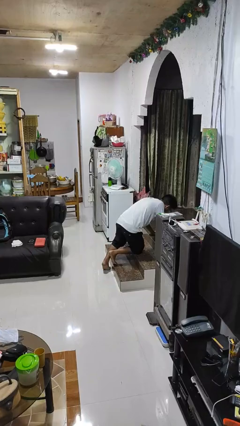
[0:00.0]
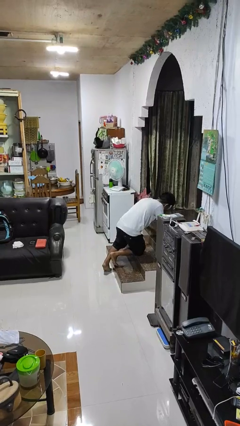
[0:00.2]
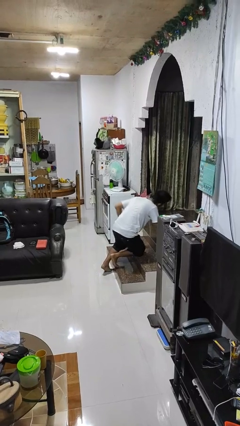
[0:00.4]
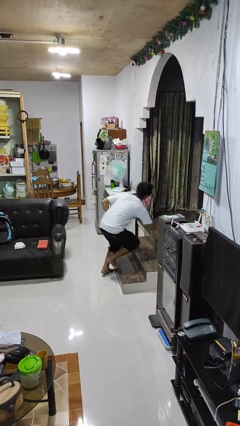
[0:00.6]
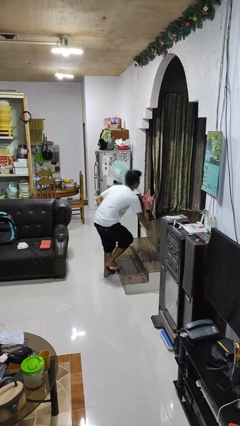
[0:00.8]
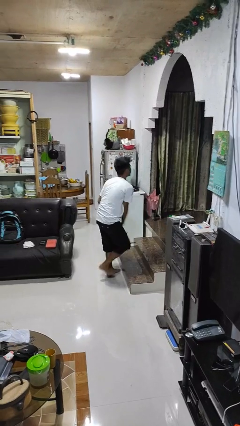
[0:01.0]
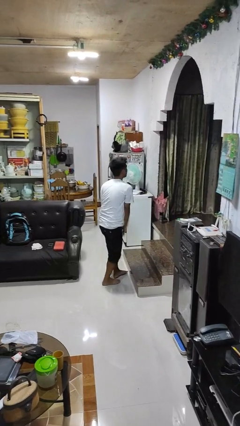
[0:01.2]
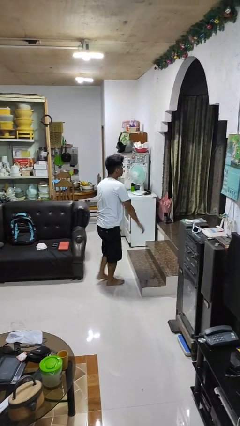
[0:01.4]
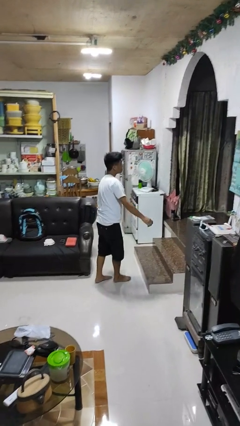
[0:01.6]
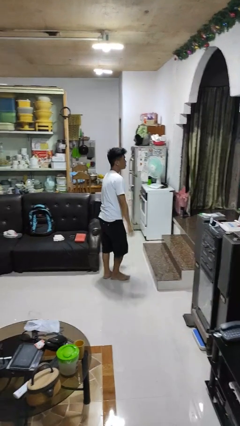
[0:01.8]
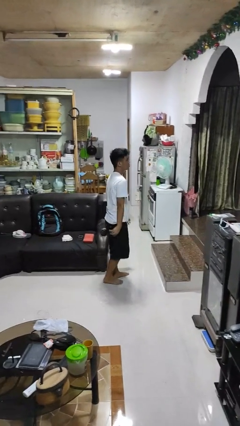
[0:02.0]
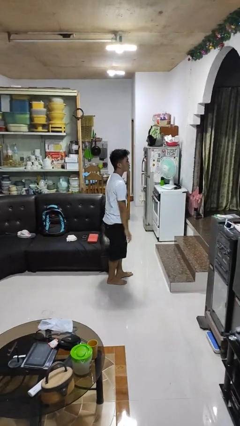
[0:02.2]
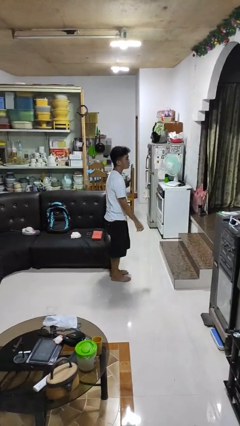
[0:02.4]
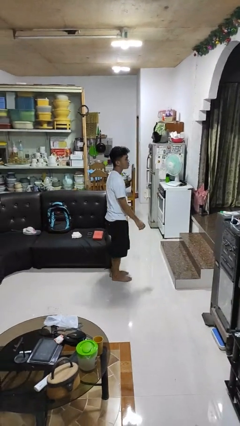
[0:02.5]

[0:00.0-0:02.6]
person stands up from floor

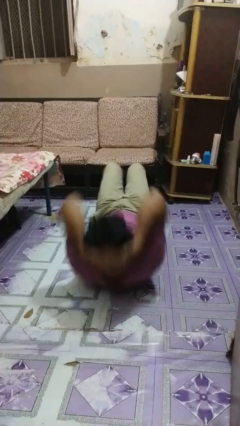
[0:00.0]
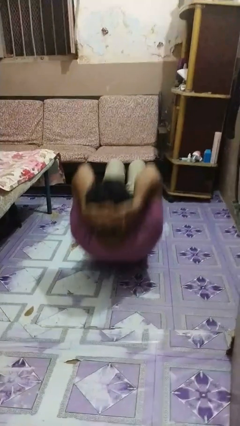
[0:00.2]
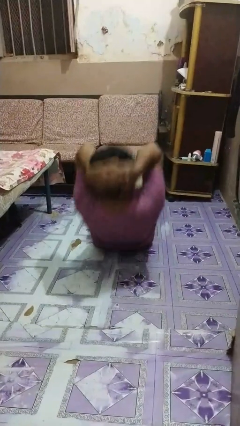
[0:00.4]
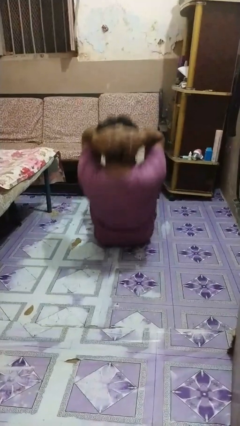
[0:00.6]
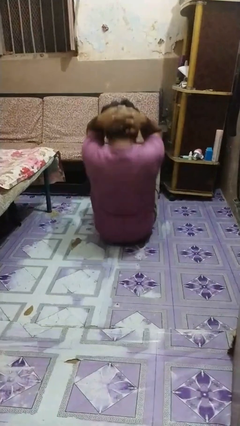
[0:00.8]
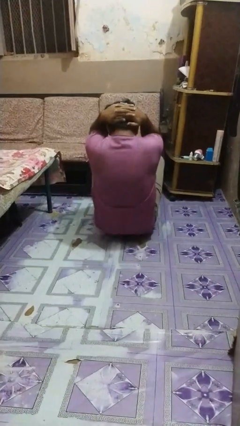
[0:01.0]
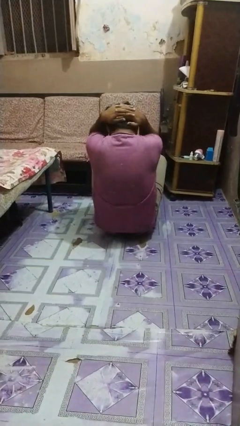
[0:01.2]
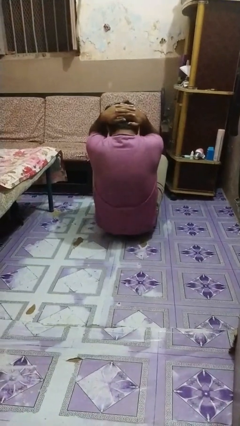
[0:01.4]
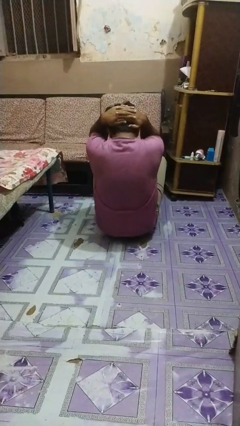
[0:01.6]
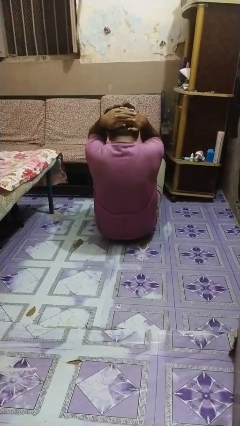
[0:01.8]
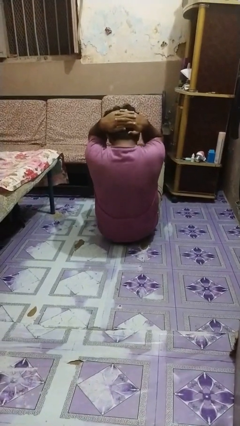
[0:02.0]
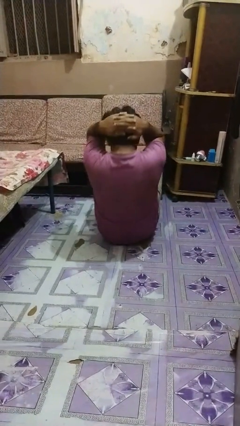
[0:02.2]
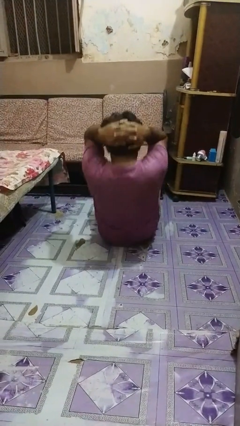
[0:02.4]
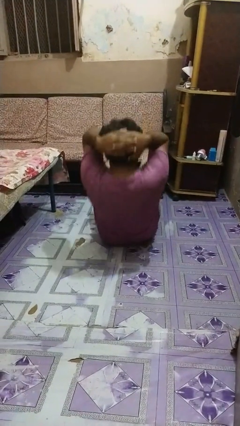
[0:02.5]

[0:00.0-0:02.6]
person exercises with situp

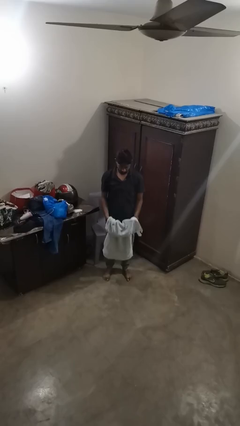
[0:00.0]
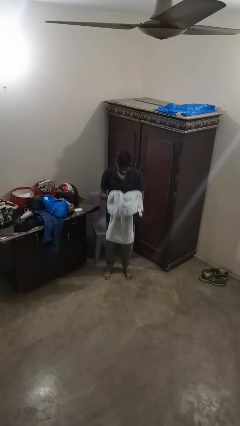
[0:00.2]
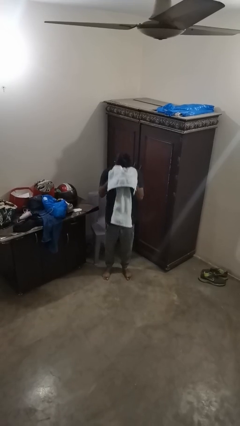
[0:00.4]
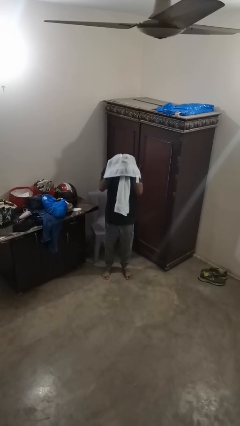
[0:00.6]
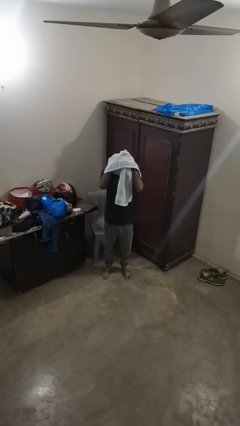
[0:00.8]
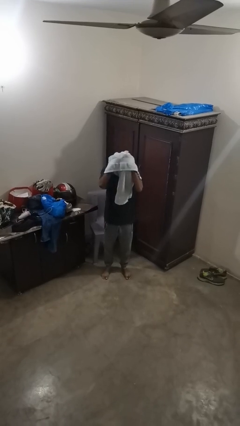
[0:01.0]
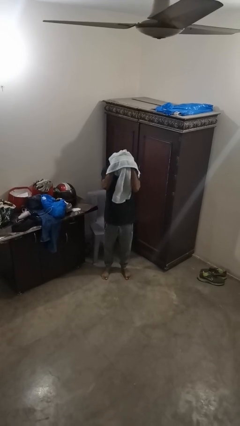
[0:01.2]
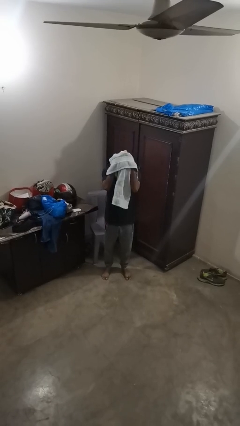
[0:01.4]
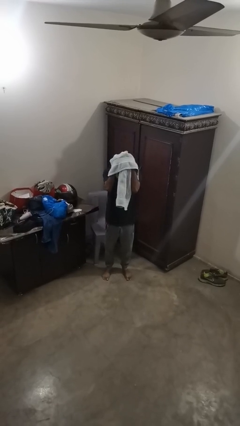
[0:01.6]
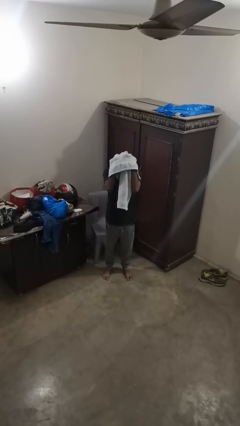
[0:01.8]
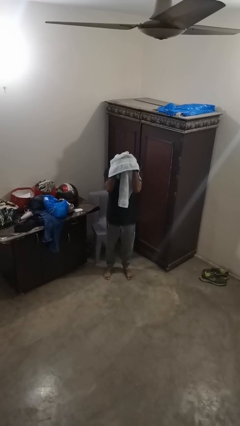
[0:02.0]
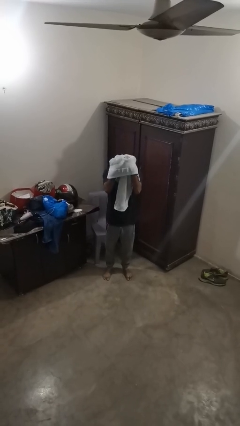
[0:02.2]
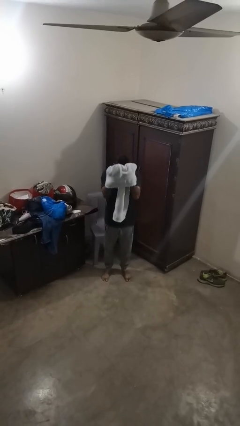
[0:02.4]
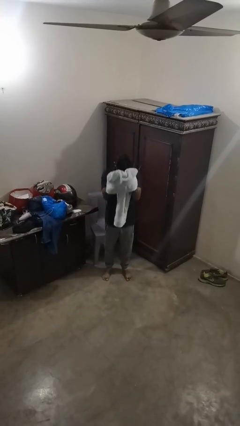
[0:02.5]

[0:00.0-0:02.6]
person dries hair with towel

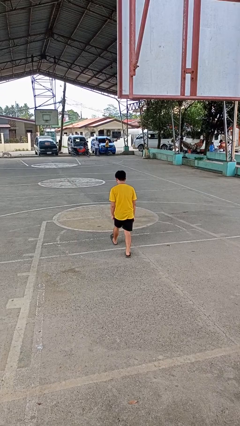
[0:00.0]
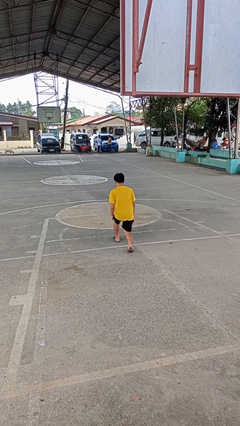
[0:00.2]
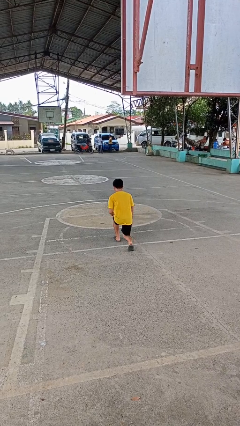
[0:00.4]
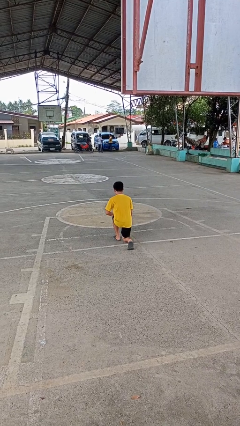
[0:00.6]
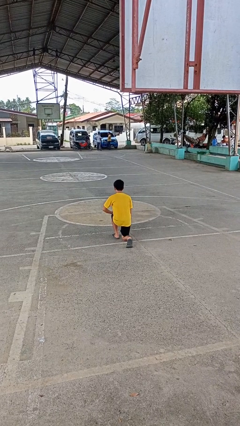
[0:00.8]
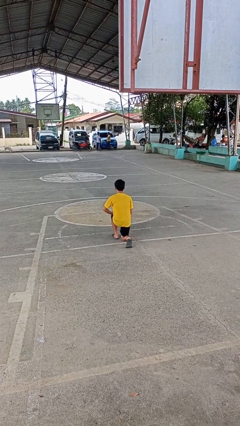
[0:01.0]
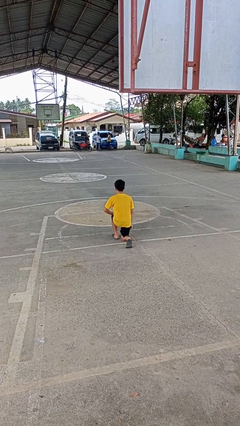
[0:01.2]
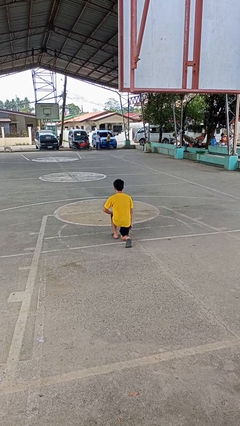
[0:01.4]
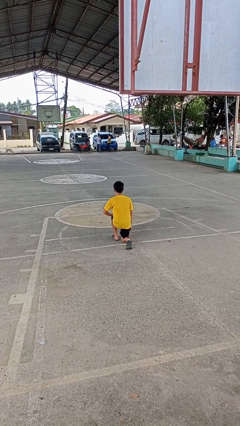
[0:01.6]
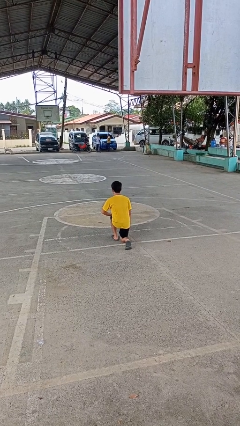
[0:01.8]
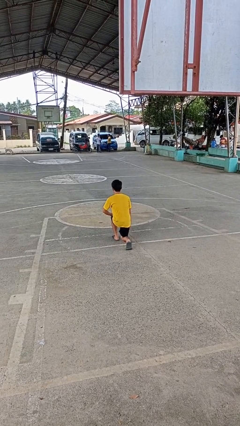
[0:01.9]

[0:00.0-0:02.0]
person kneels

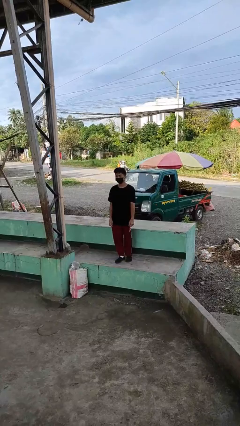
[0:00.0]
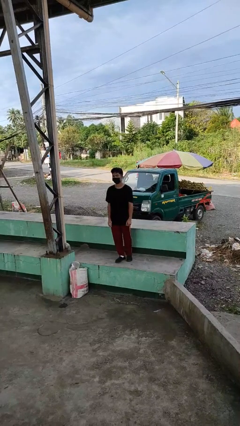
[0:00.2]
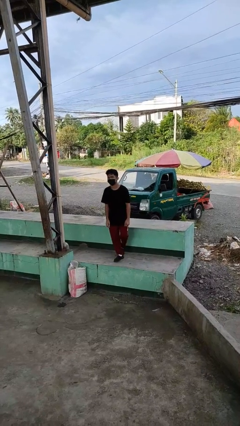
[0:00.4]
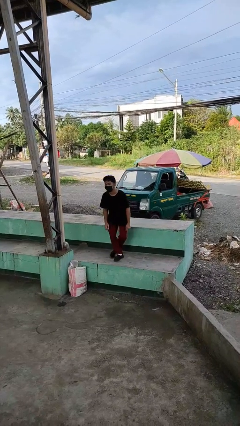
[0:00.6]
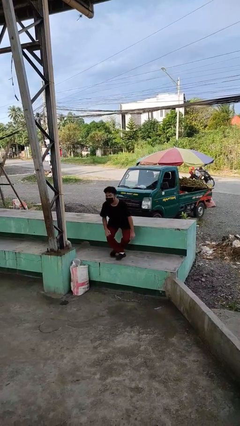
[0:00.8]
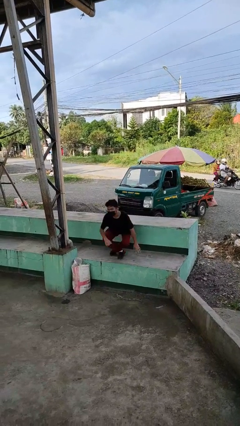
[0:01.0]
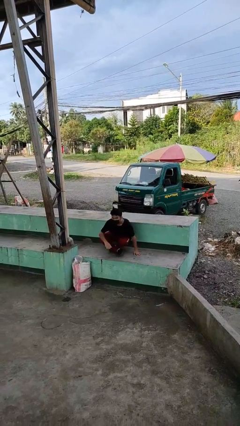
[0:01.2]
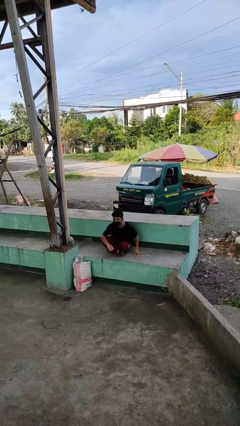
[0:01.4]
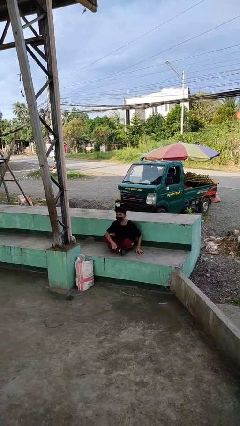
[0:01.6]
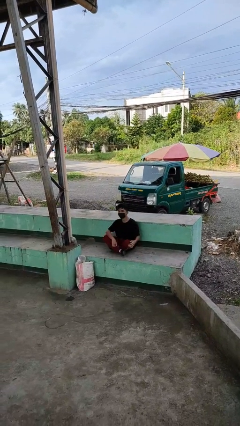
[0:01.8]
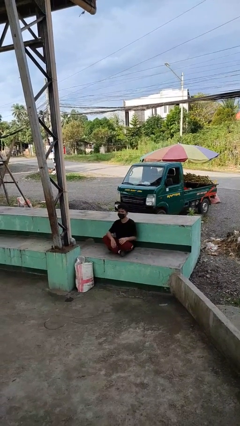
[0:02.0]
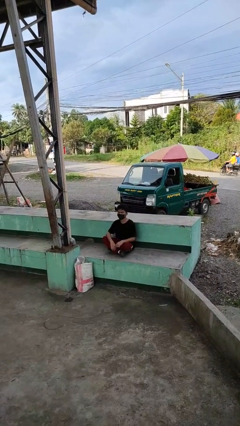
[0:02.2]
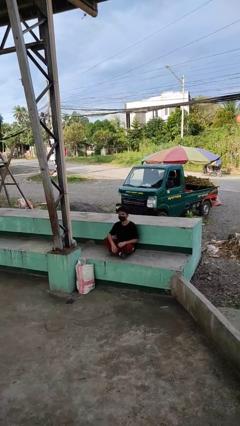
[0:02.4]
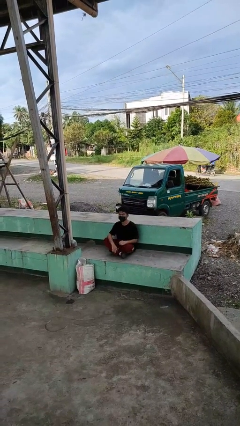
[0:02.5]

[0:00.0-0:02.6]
person sits crisscross

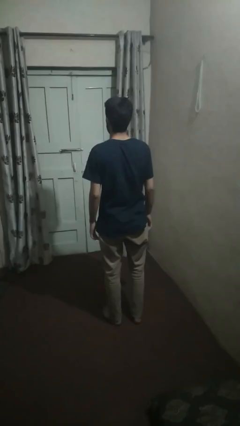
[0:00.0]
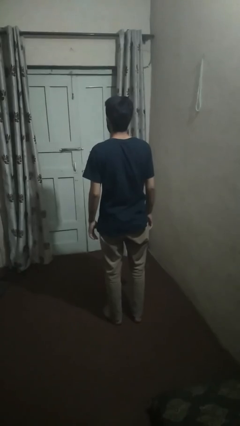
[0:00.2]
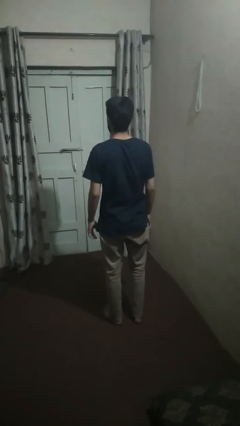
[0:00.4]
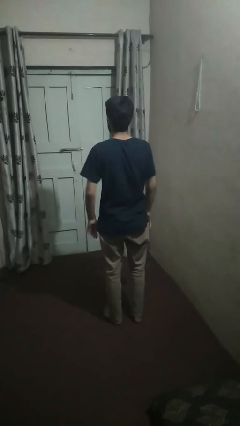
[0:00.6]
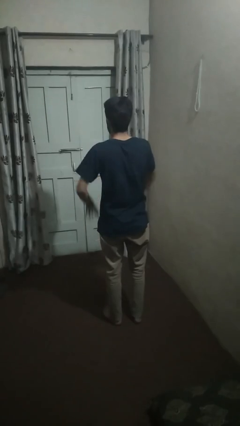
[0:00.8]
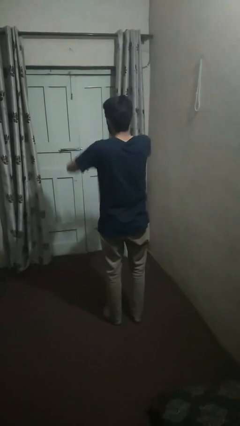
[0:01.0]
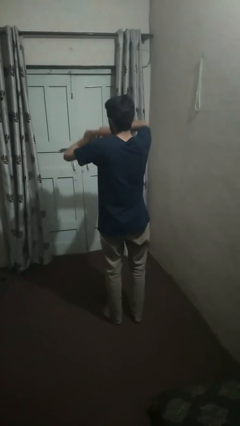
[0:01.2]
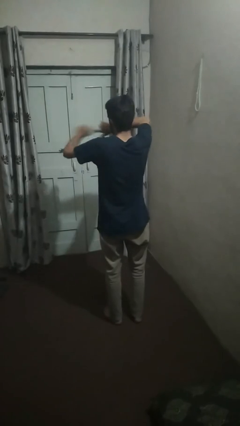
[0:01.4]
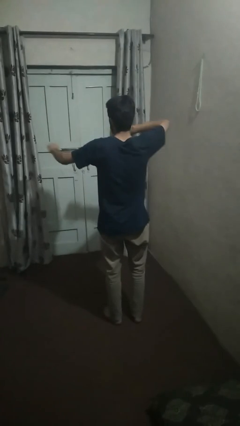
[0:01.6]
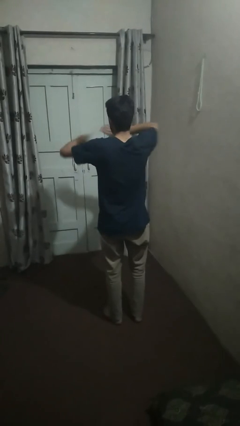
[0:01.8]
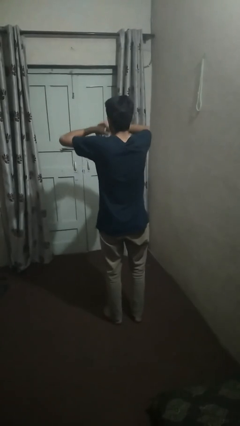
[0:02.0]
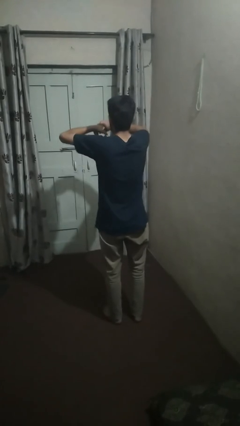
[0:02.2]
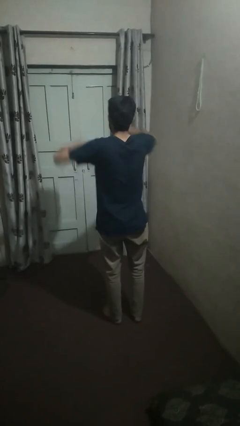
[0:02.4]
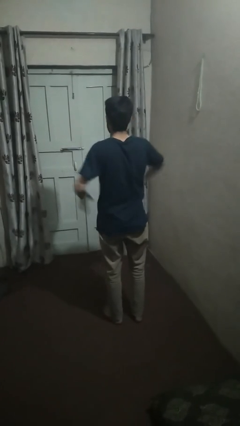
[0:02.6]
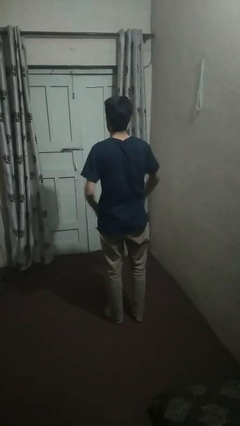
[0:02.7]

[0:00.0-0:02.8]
person snaps fingers

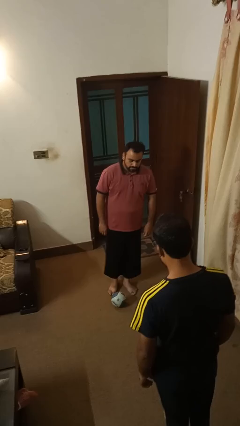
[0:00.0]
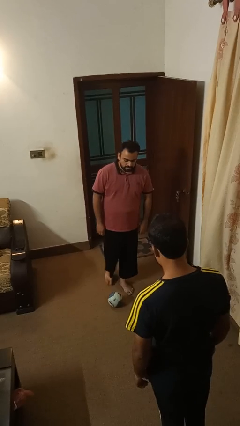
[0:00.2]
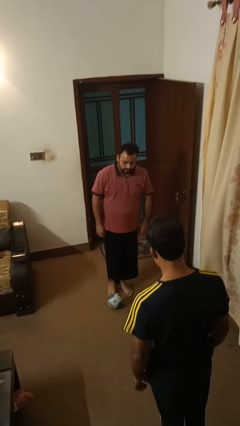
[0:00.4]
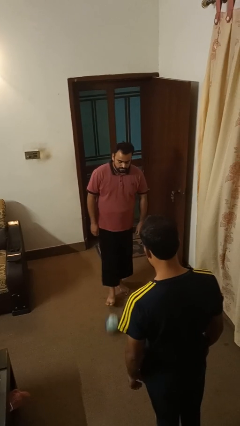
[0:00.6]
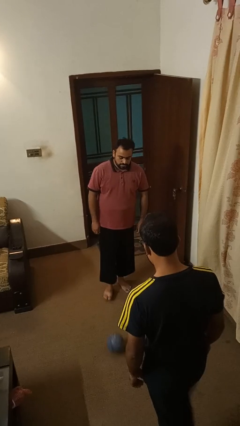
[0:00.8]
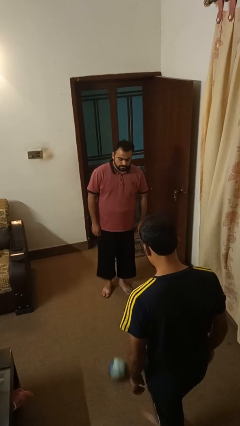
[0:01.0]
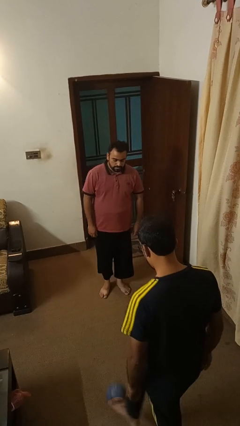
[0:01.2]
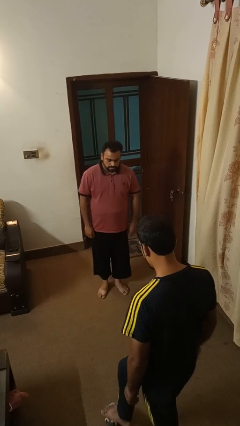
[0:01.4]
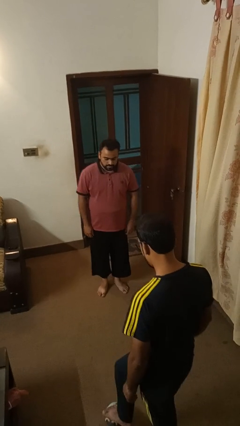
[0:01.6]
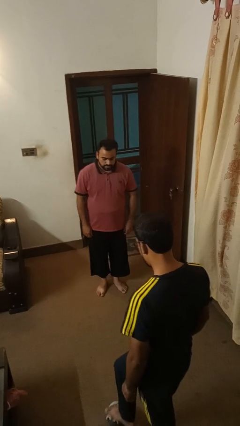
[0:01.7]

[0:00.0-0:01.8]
person kicks object to person
